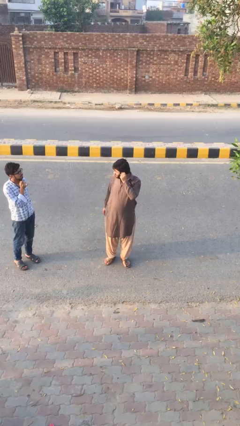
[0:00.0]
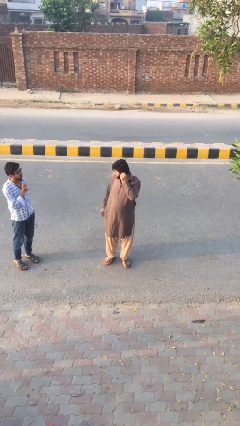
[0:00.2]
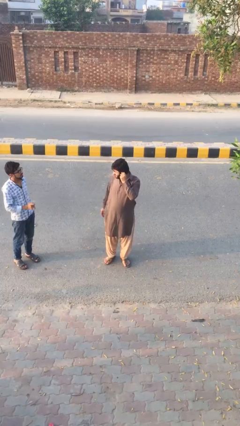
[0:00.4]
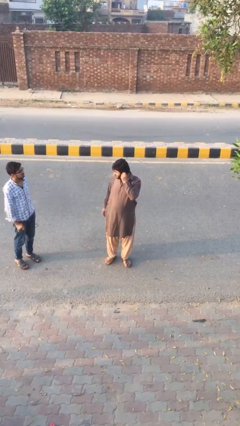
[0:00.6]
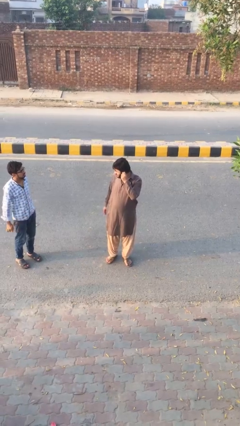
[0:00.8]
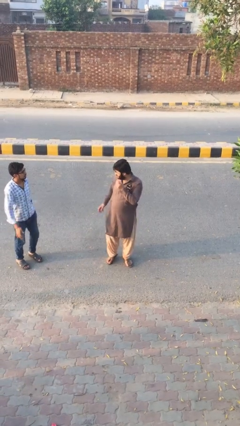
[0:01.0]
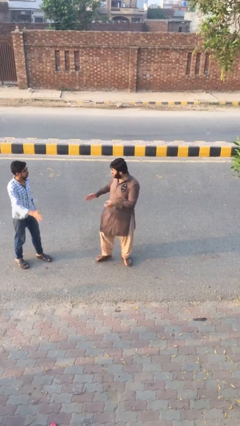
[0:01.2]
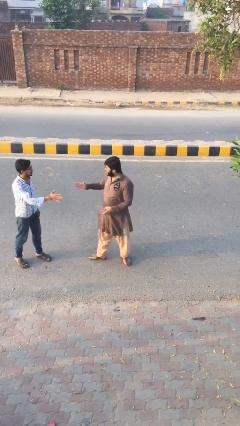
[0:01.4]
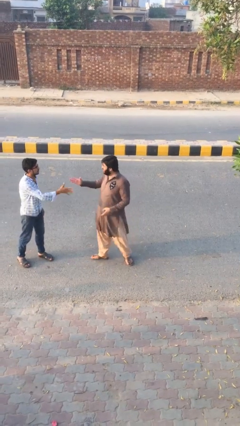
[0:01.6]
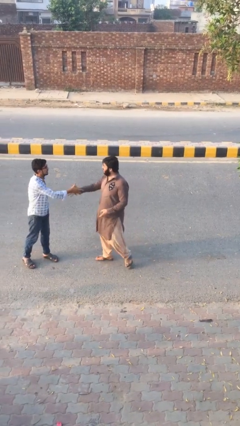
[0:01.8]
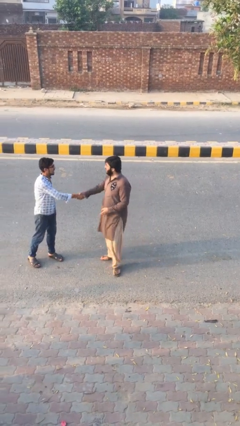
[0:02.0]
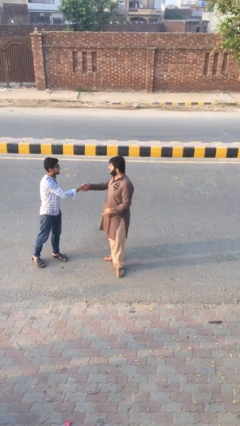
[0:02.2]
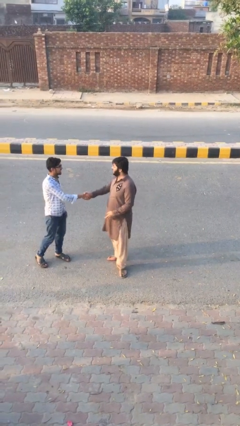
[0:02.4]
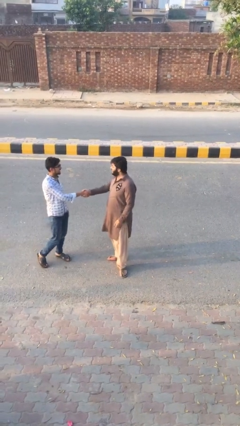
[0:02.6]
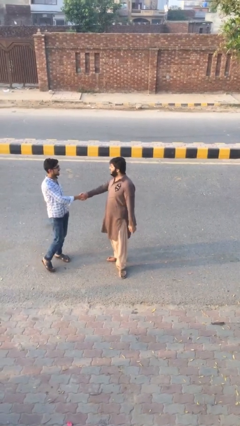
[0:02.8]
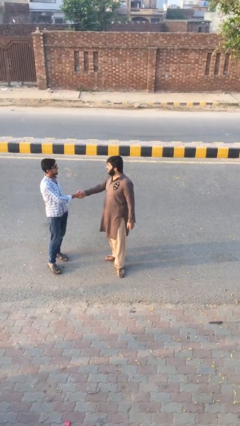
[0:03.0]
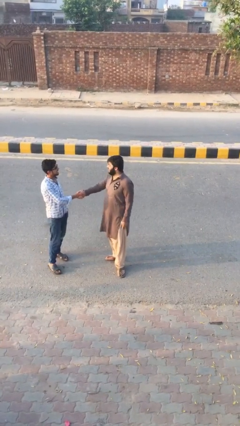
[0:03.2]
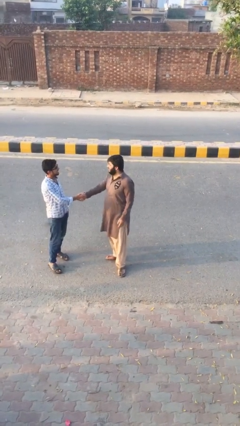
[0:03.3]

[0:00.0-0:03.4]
person shakes hand

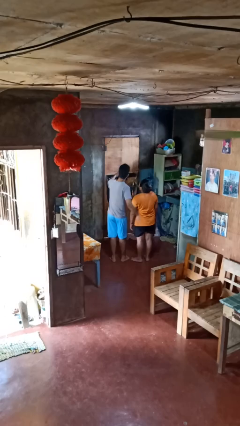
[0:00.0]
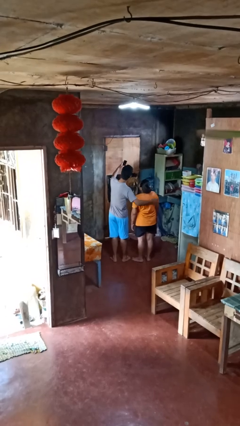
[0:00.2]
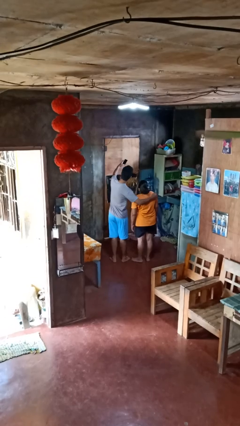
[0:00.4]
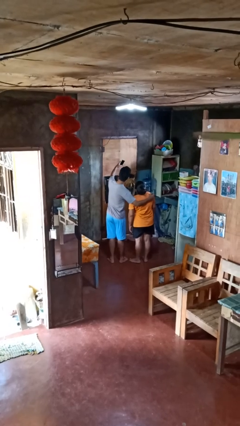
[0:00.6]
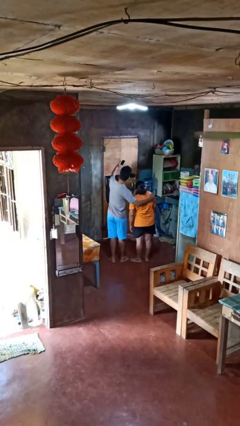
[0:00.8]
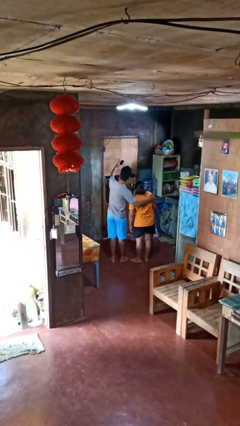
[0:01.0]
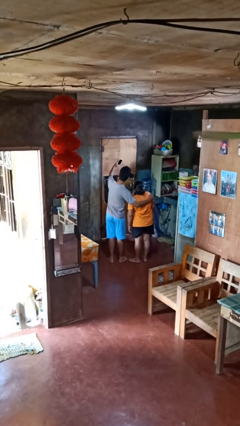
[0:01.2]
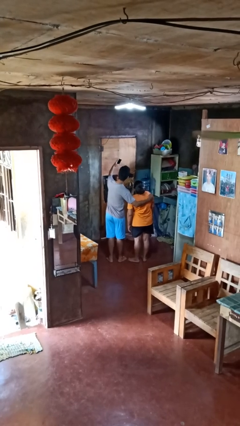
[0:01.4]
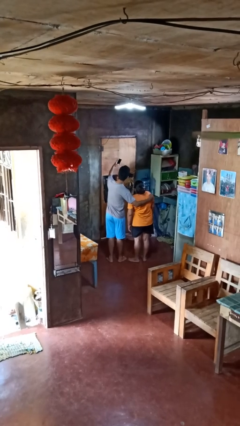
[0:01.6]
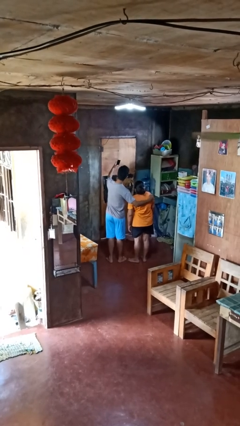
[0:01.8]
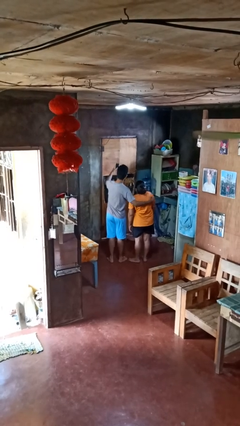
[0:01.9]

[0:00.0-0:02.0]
person takes selfie with person

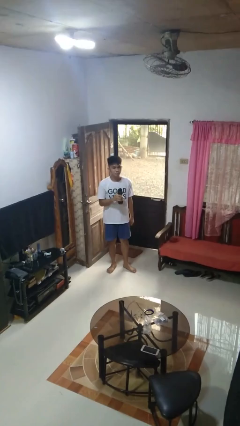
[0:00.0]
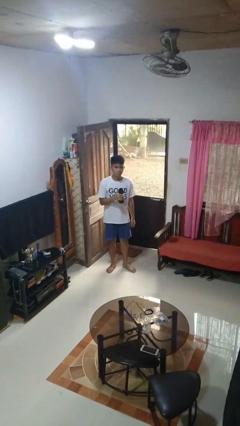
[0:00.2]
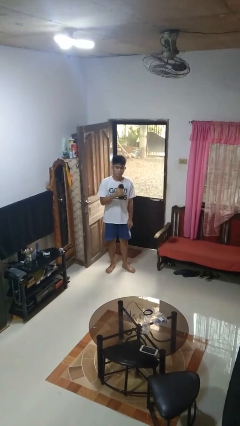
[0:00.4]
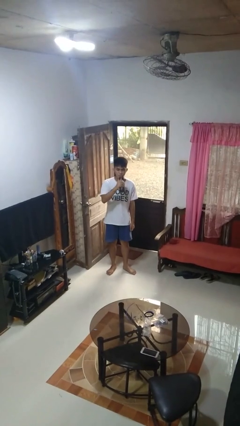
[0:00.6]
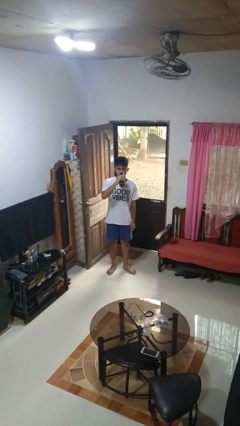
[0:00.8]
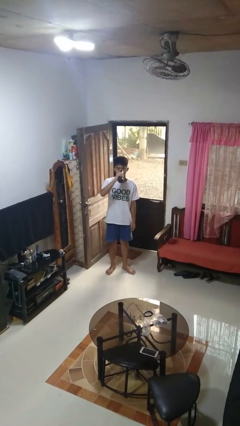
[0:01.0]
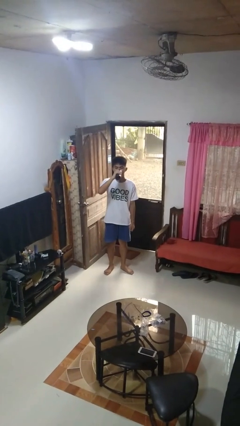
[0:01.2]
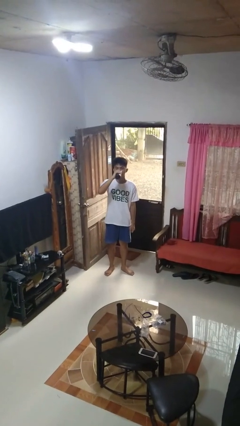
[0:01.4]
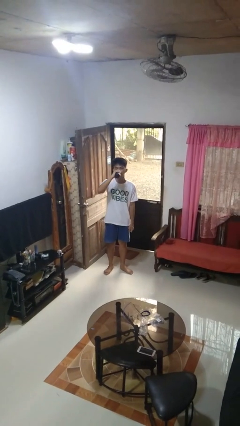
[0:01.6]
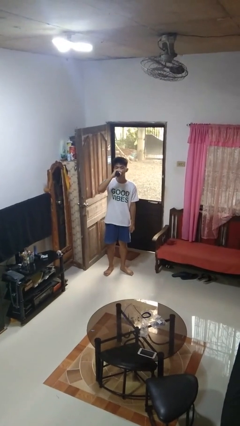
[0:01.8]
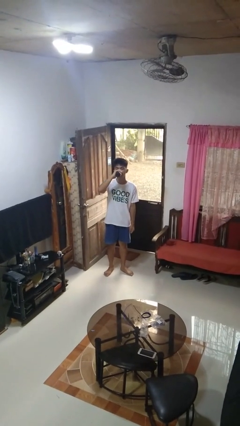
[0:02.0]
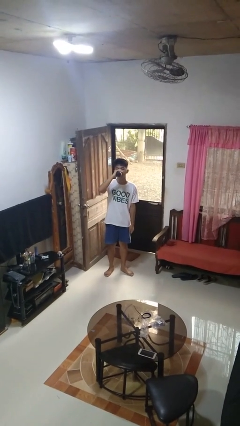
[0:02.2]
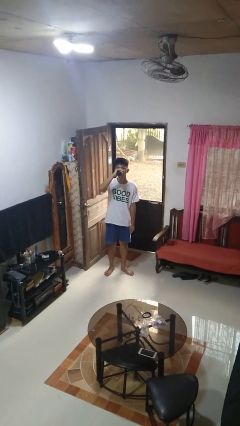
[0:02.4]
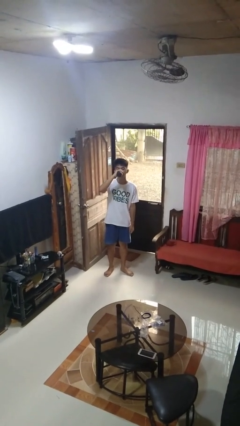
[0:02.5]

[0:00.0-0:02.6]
person drinks from bottle

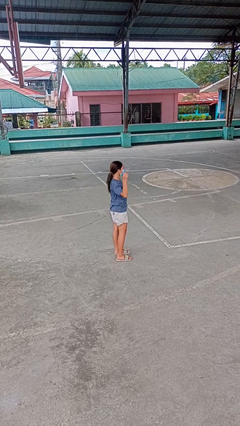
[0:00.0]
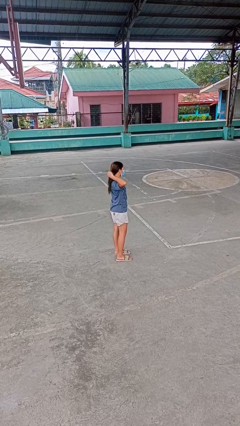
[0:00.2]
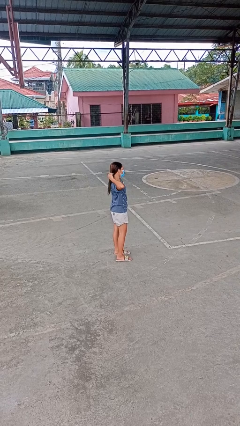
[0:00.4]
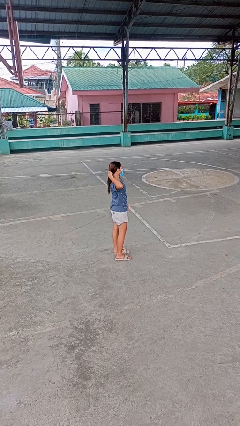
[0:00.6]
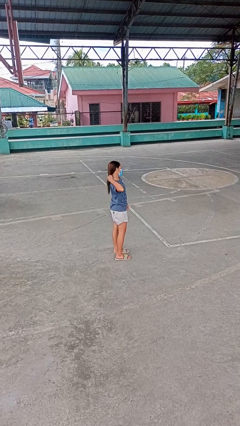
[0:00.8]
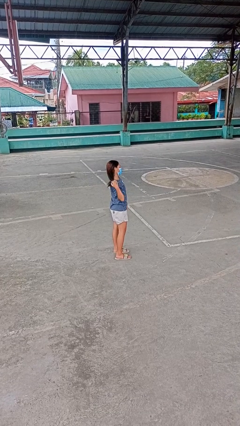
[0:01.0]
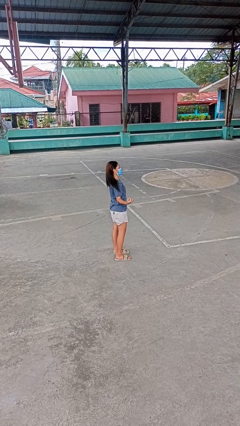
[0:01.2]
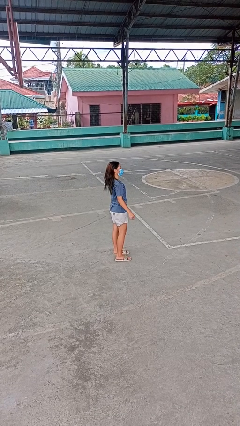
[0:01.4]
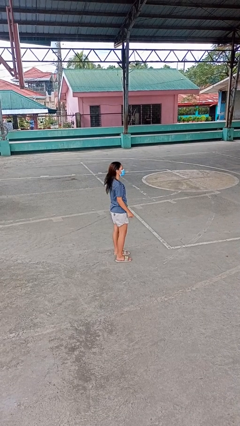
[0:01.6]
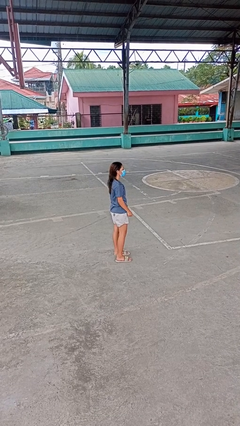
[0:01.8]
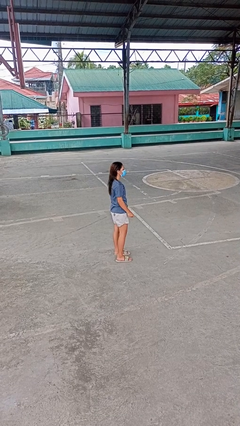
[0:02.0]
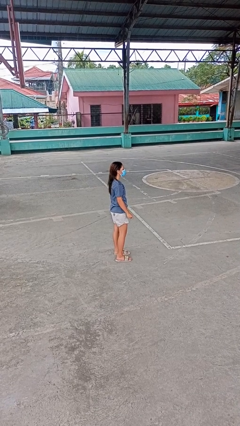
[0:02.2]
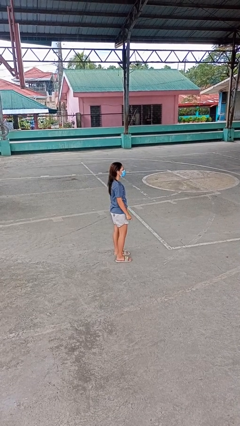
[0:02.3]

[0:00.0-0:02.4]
person takes off hairtie

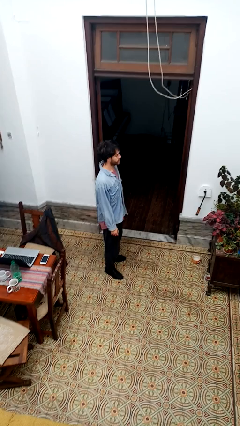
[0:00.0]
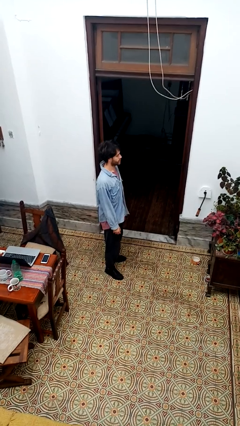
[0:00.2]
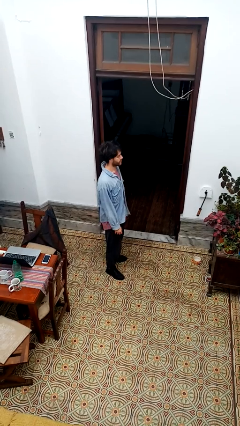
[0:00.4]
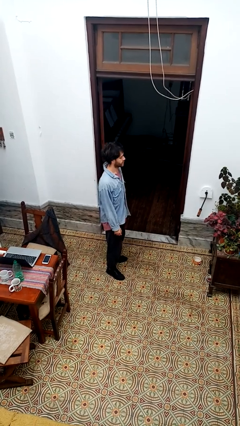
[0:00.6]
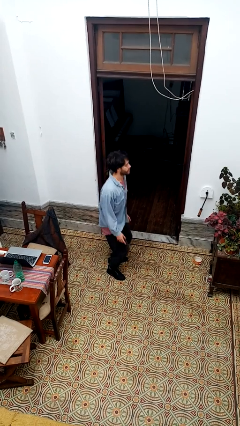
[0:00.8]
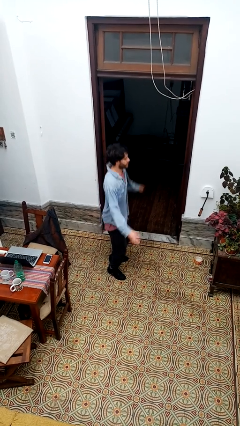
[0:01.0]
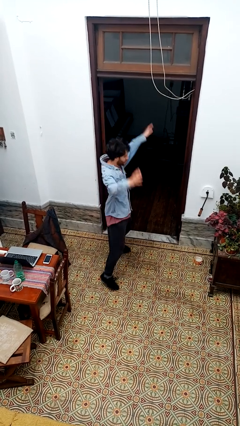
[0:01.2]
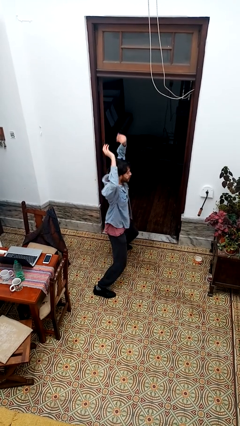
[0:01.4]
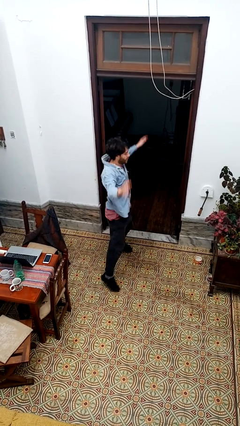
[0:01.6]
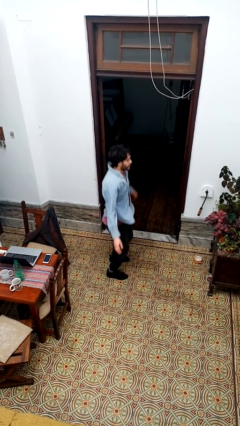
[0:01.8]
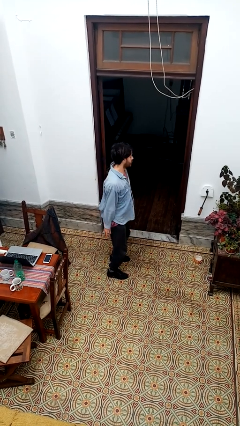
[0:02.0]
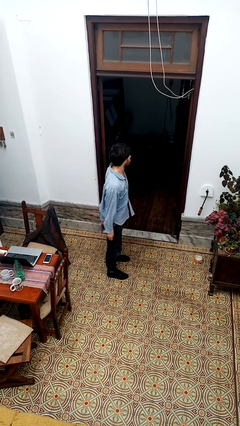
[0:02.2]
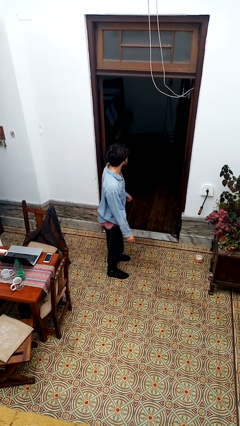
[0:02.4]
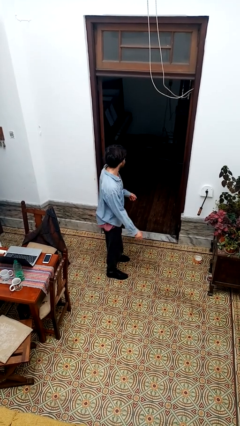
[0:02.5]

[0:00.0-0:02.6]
person exercises with jumping jacks

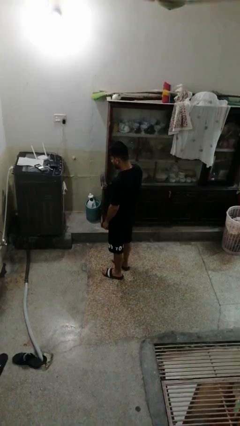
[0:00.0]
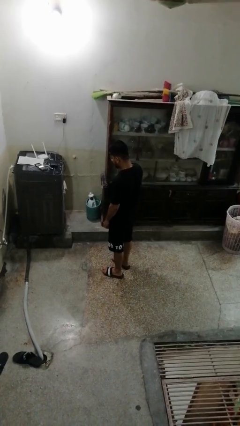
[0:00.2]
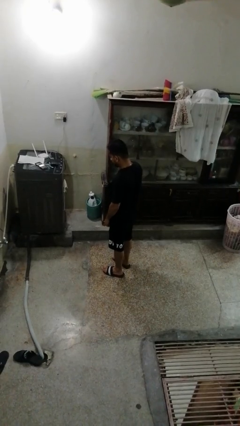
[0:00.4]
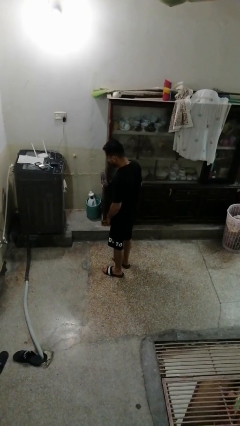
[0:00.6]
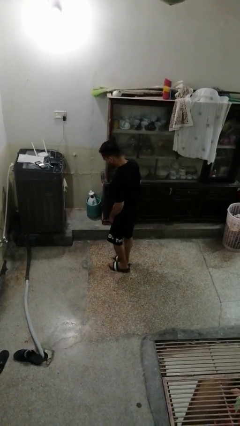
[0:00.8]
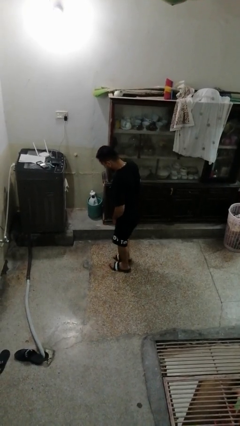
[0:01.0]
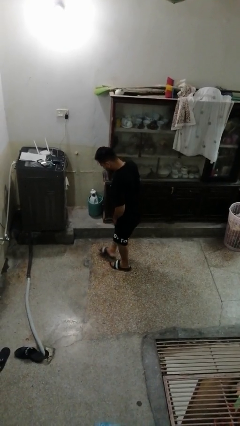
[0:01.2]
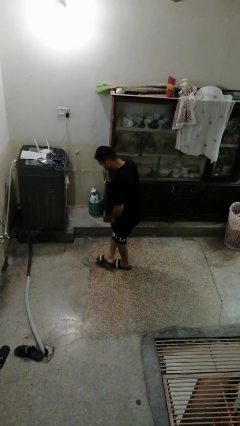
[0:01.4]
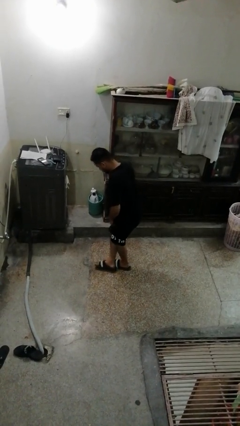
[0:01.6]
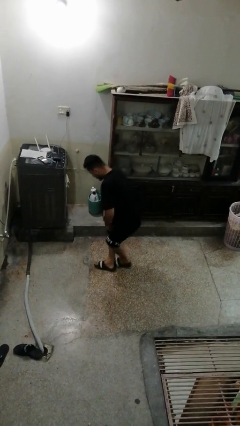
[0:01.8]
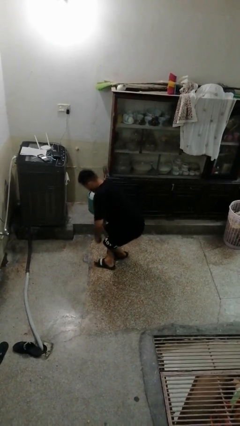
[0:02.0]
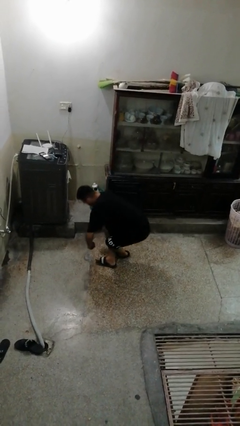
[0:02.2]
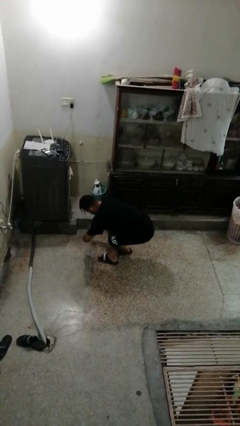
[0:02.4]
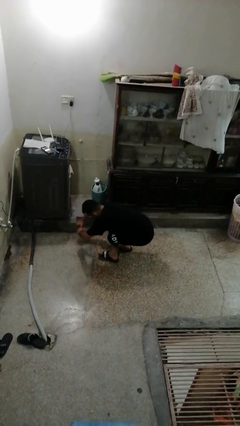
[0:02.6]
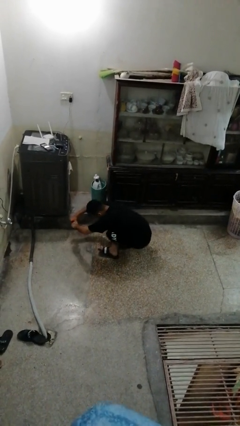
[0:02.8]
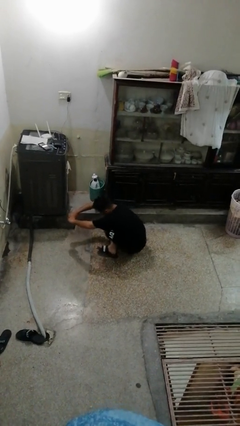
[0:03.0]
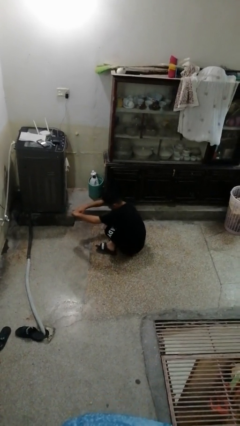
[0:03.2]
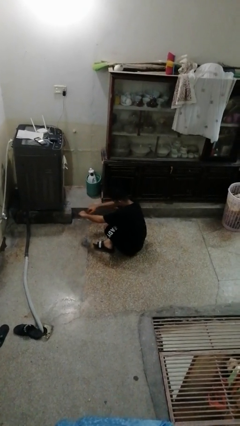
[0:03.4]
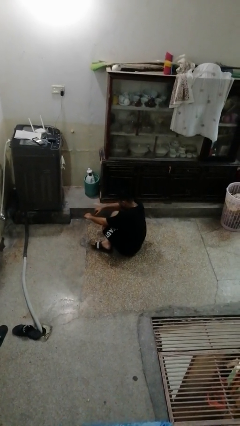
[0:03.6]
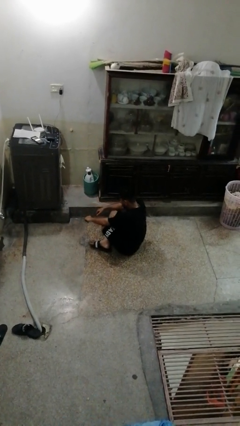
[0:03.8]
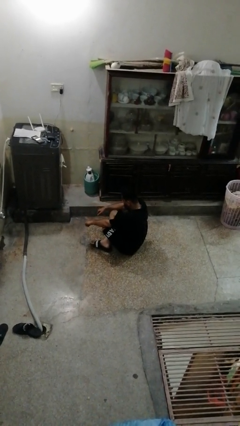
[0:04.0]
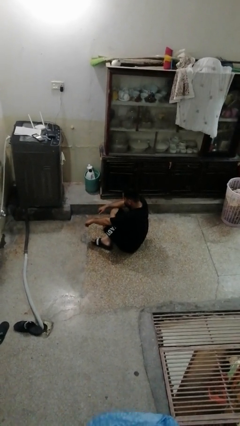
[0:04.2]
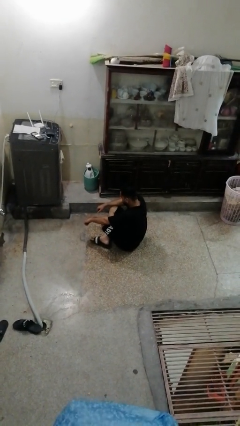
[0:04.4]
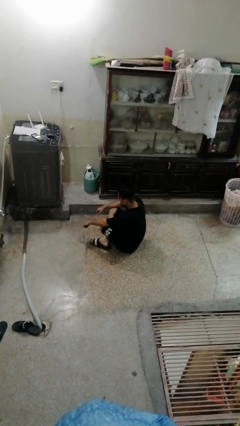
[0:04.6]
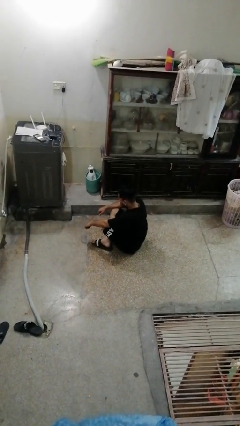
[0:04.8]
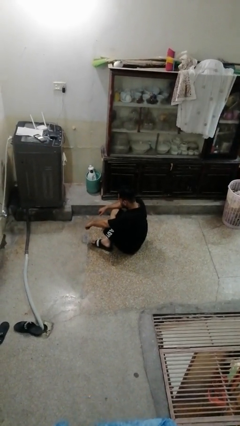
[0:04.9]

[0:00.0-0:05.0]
person sits crisscross
